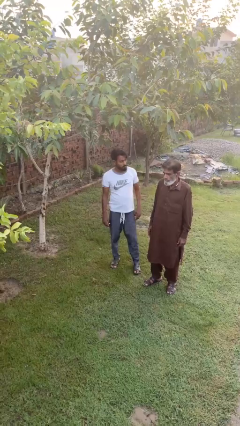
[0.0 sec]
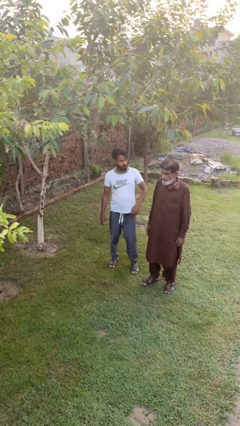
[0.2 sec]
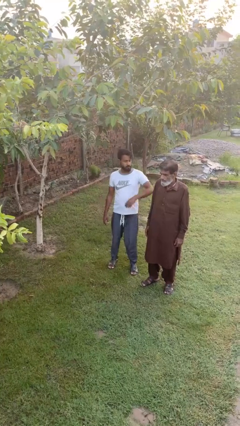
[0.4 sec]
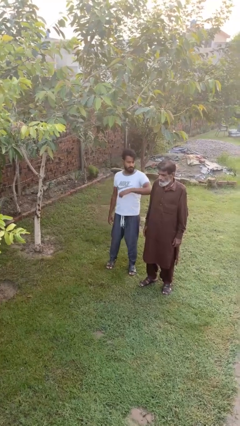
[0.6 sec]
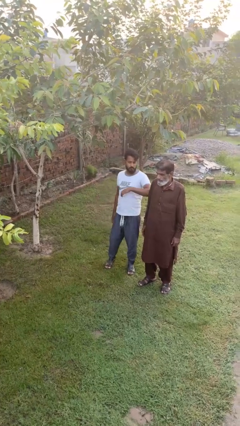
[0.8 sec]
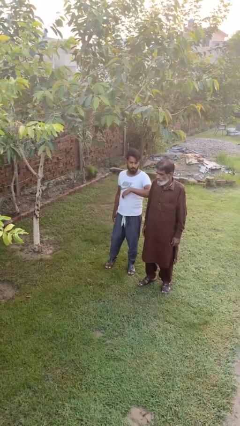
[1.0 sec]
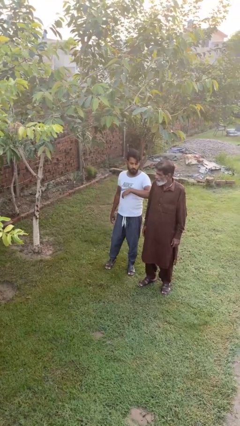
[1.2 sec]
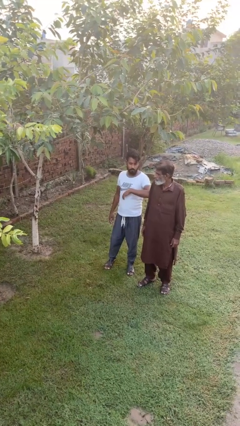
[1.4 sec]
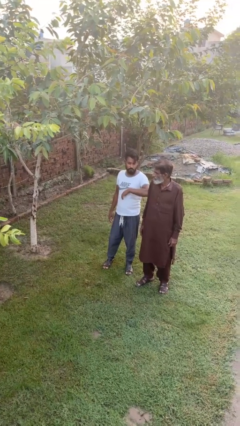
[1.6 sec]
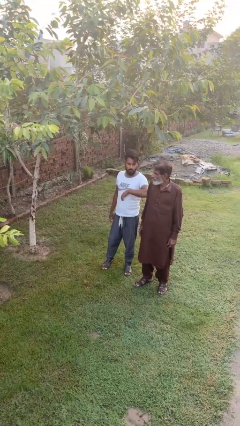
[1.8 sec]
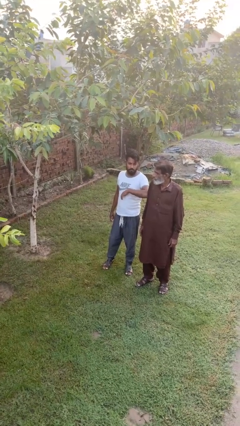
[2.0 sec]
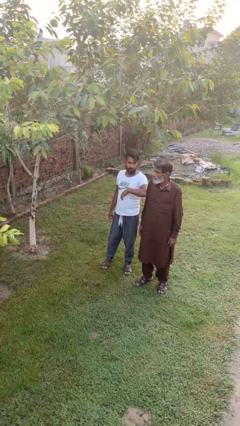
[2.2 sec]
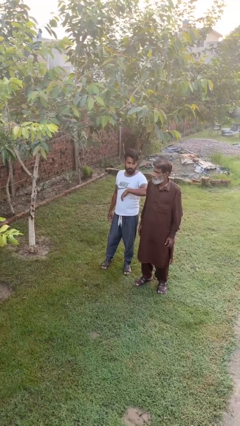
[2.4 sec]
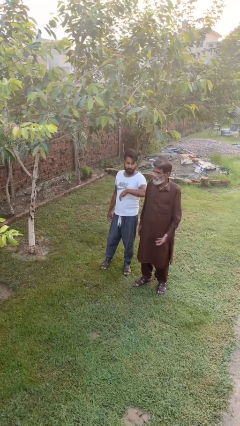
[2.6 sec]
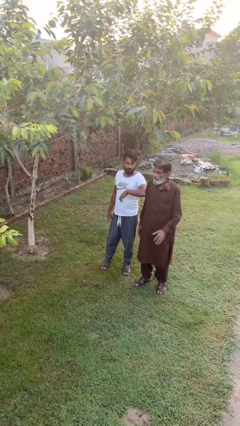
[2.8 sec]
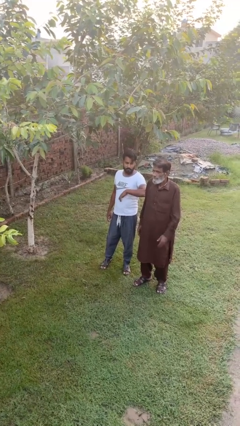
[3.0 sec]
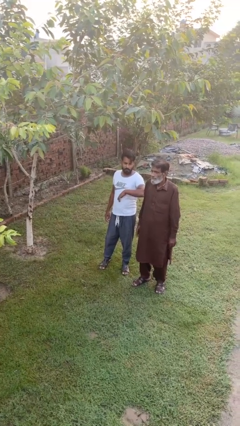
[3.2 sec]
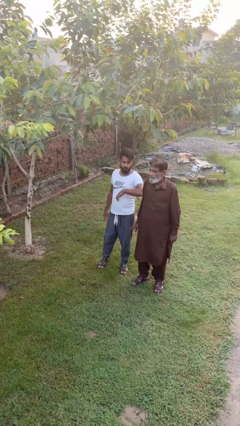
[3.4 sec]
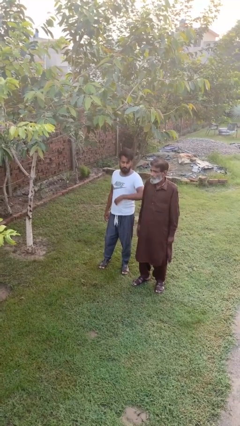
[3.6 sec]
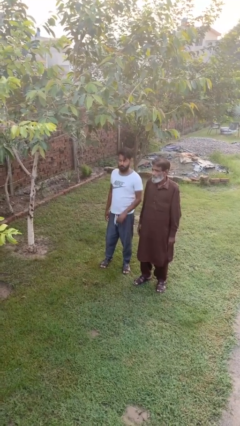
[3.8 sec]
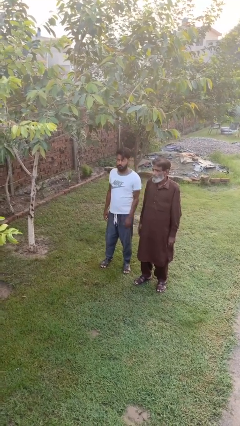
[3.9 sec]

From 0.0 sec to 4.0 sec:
person nudges person with elbow

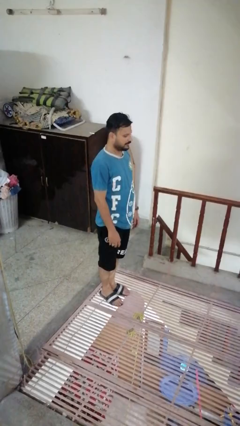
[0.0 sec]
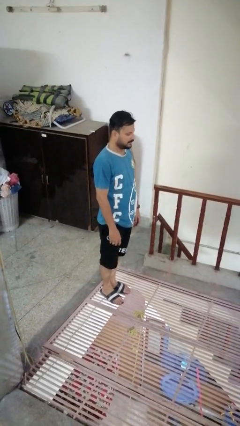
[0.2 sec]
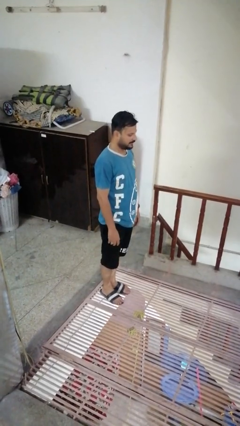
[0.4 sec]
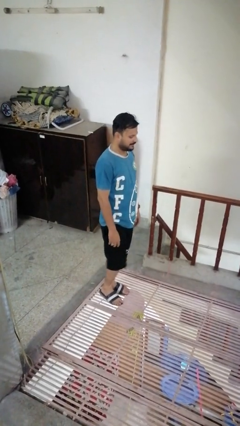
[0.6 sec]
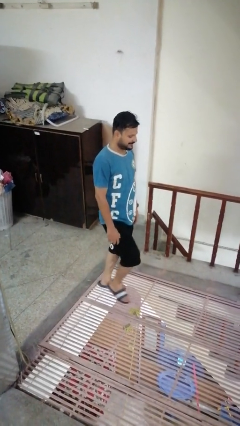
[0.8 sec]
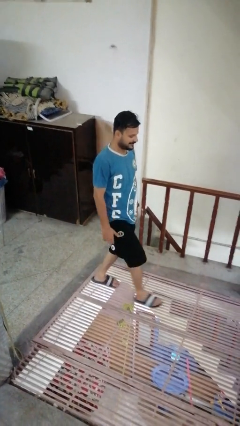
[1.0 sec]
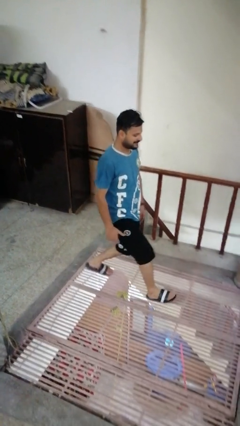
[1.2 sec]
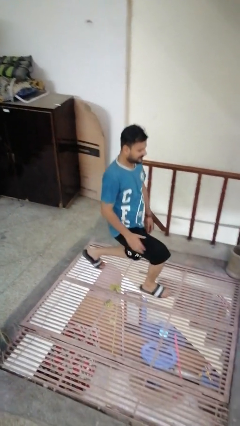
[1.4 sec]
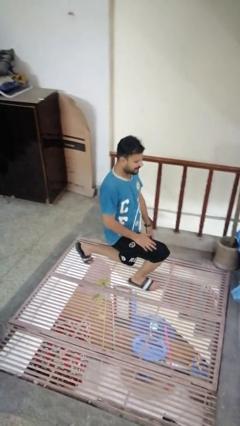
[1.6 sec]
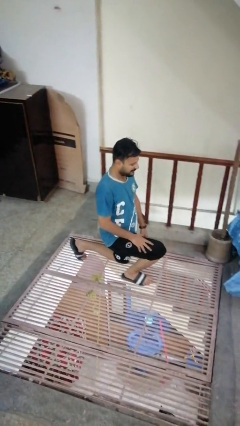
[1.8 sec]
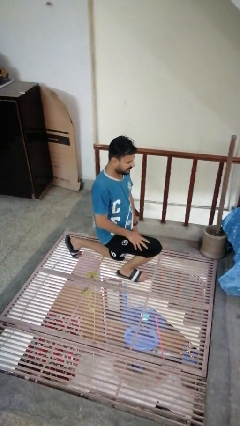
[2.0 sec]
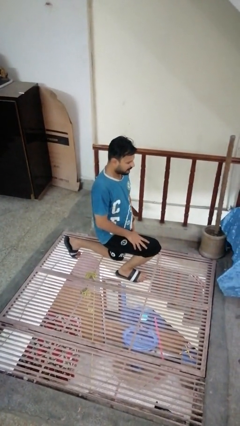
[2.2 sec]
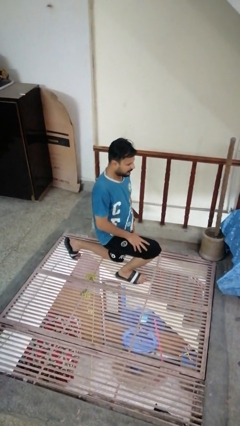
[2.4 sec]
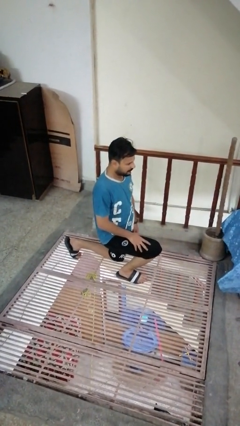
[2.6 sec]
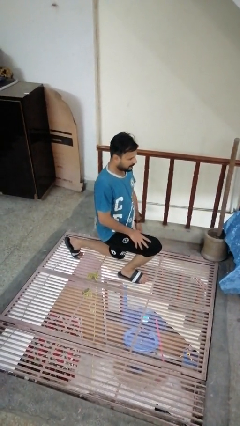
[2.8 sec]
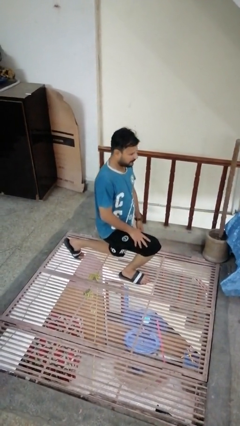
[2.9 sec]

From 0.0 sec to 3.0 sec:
person exercises with lunges

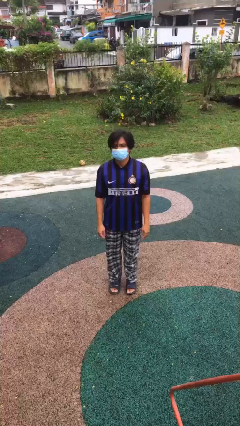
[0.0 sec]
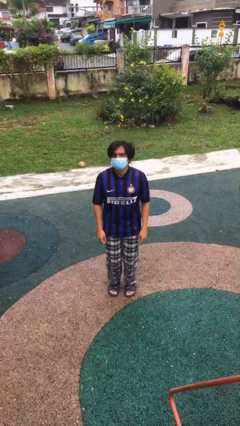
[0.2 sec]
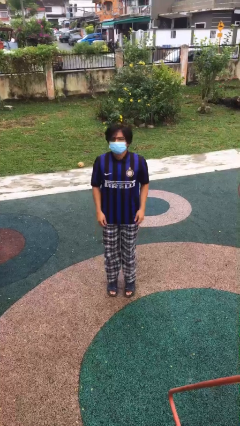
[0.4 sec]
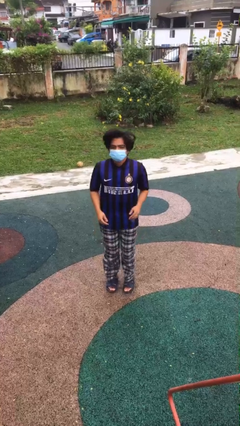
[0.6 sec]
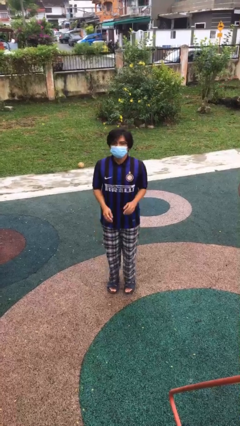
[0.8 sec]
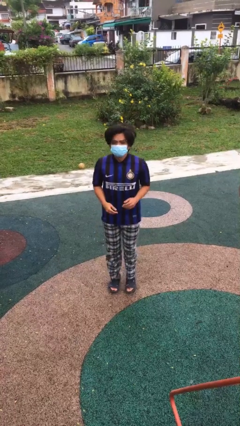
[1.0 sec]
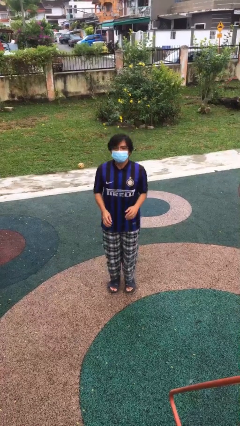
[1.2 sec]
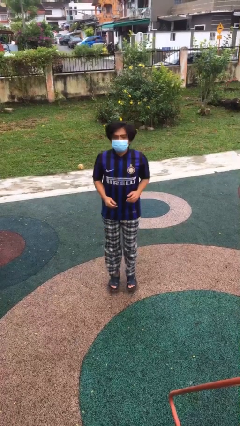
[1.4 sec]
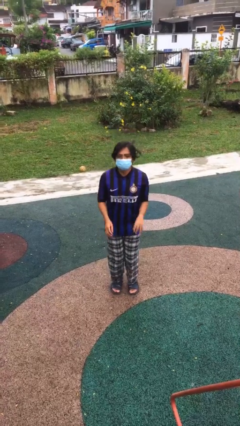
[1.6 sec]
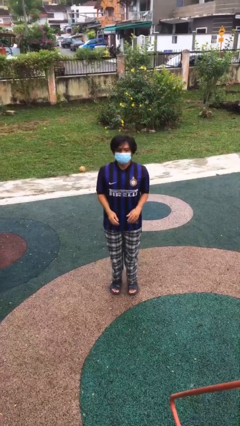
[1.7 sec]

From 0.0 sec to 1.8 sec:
person jumps

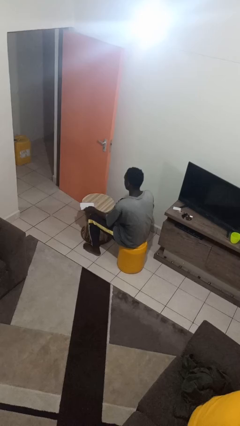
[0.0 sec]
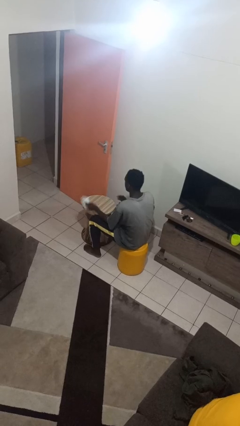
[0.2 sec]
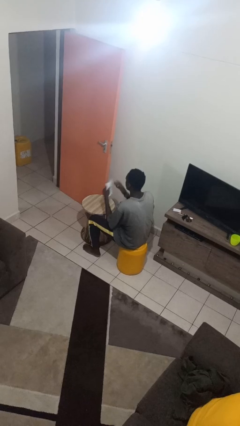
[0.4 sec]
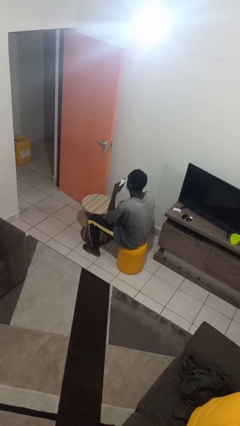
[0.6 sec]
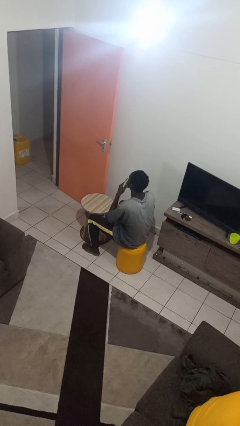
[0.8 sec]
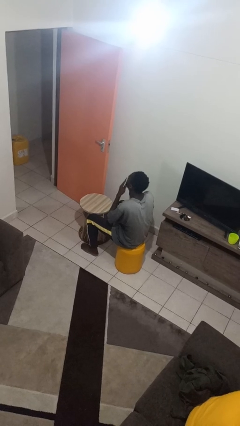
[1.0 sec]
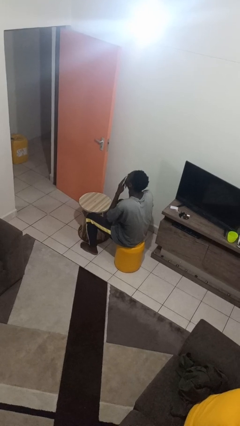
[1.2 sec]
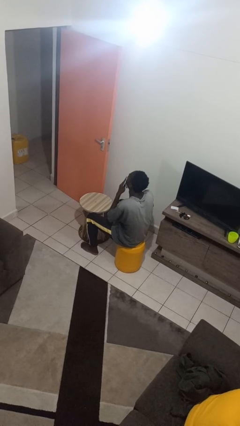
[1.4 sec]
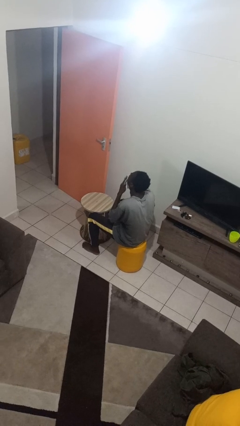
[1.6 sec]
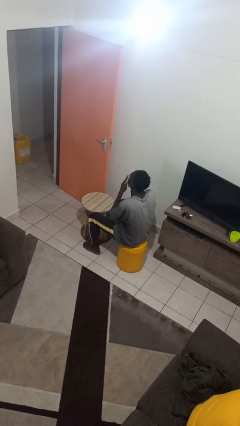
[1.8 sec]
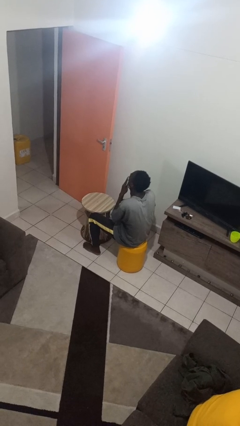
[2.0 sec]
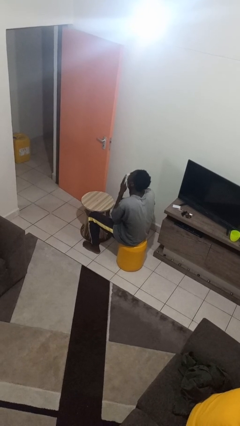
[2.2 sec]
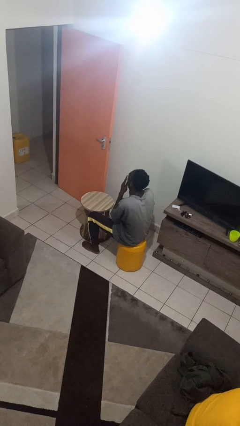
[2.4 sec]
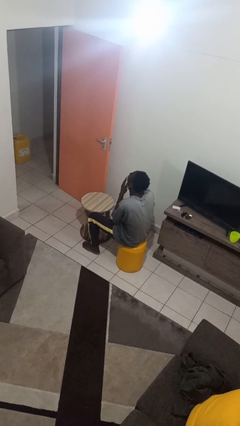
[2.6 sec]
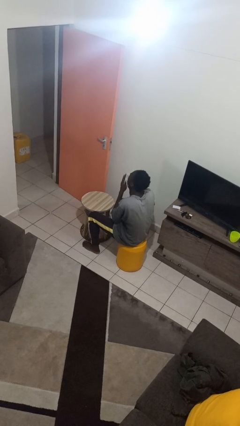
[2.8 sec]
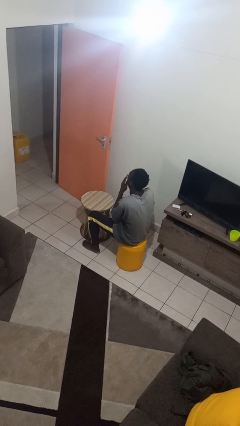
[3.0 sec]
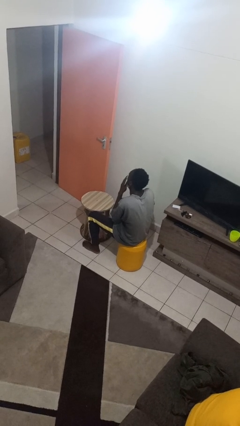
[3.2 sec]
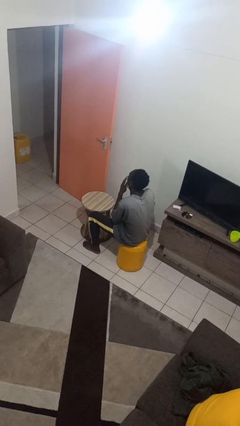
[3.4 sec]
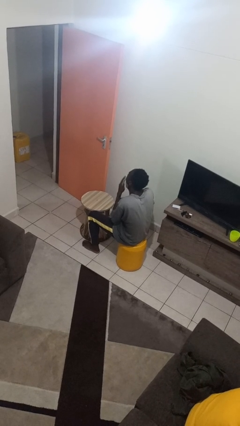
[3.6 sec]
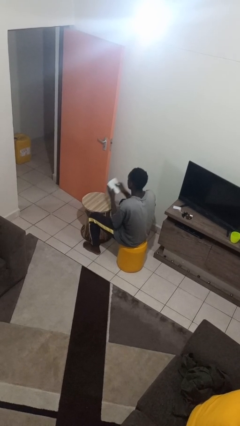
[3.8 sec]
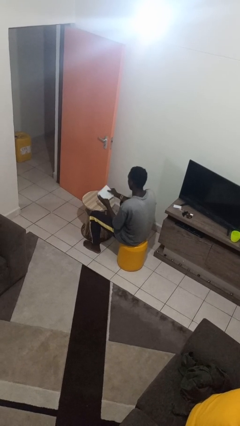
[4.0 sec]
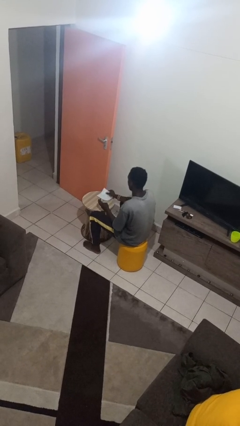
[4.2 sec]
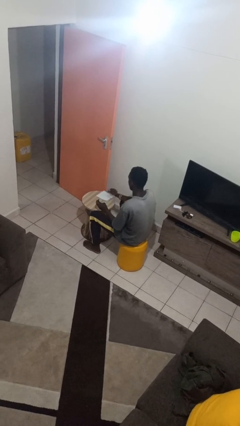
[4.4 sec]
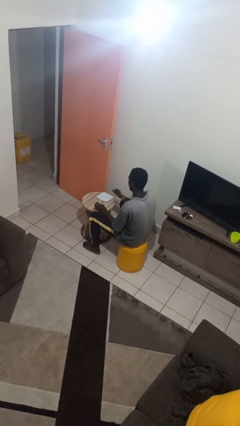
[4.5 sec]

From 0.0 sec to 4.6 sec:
person wipes mouth with napkin

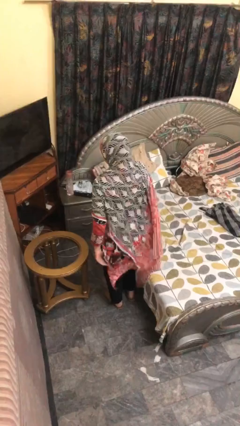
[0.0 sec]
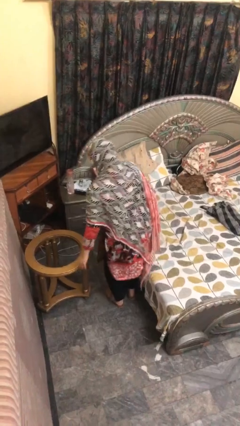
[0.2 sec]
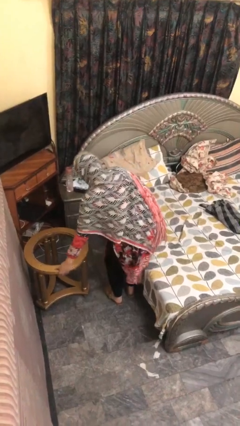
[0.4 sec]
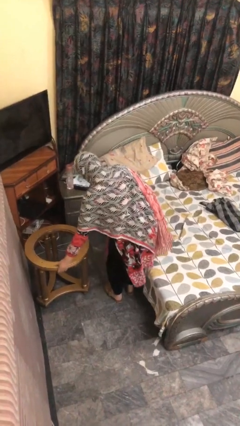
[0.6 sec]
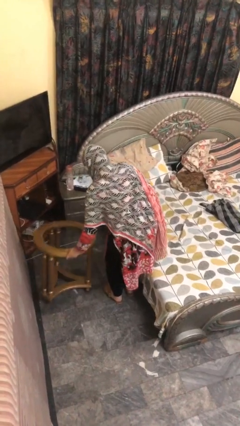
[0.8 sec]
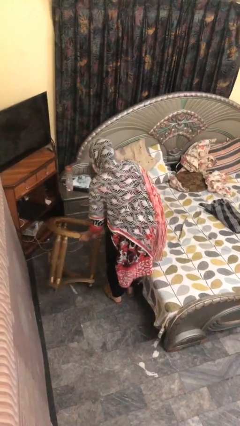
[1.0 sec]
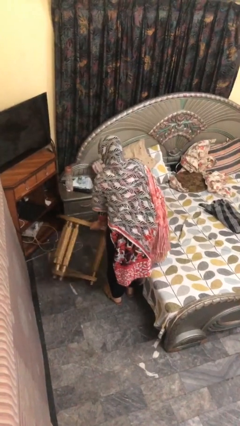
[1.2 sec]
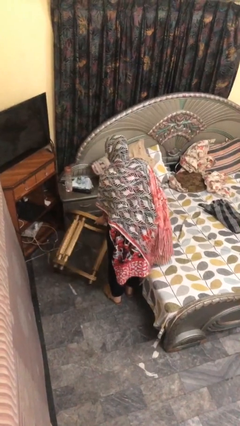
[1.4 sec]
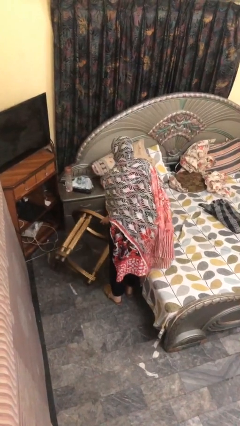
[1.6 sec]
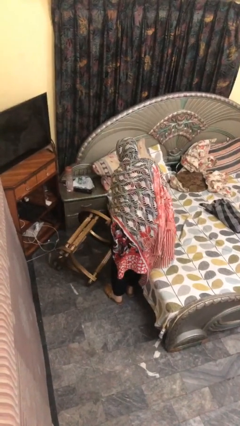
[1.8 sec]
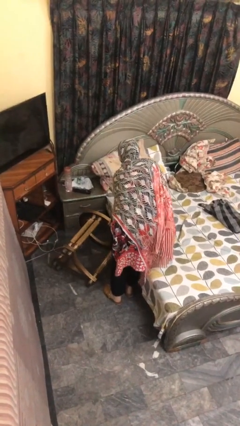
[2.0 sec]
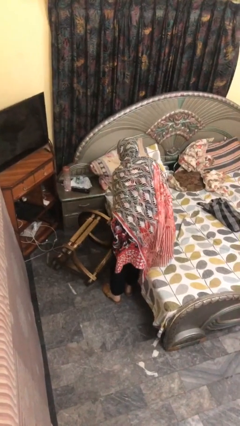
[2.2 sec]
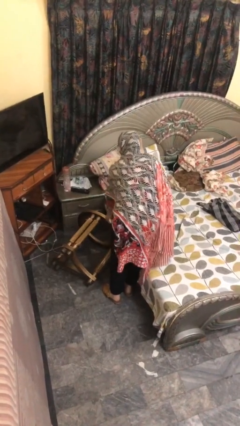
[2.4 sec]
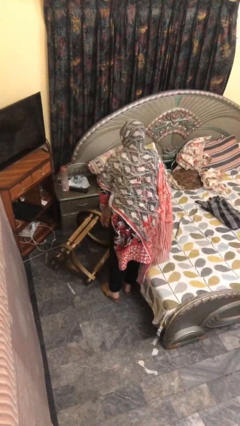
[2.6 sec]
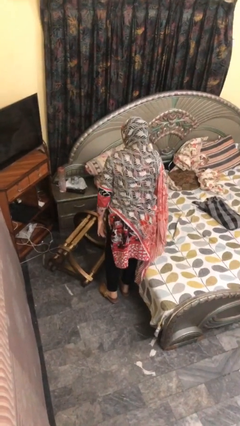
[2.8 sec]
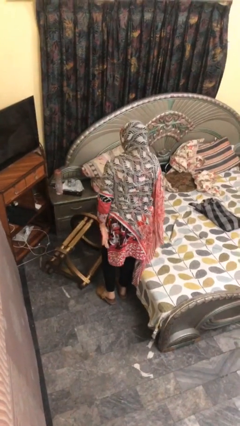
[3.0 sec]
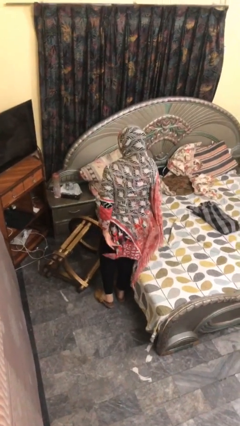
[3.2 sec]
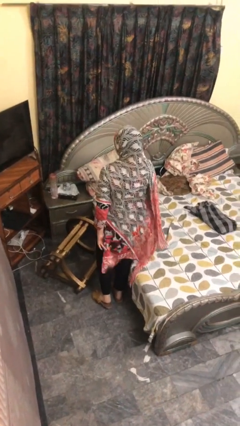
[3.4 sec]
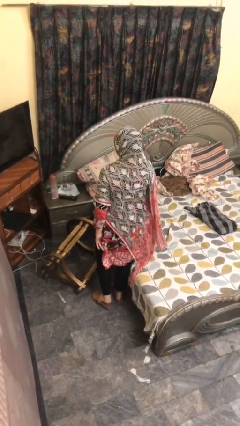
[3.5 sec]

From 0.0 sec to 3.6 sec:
person knocks over furniture
